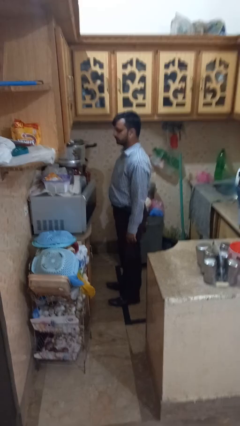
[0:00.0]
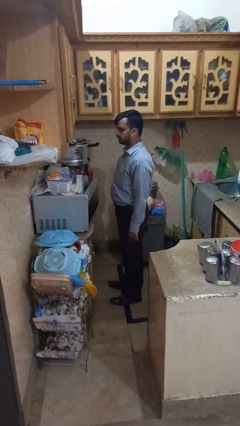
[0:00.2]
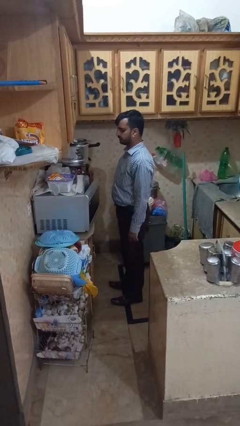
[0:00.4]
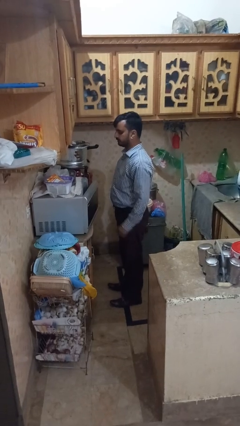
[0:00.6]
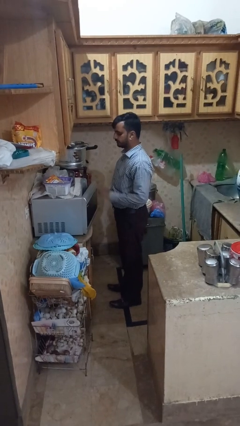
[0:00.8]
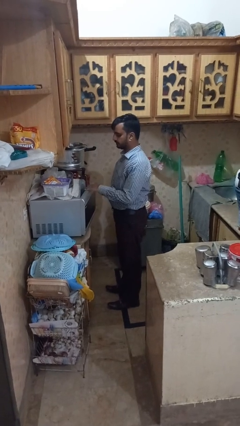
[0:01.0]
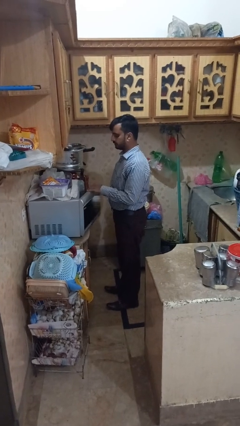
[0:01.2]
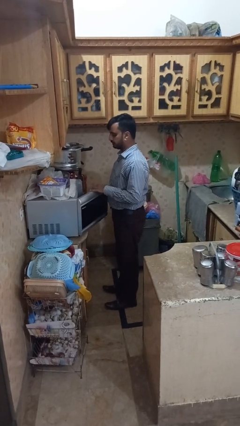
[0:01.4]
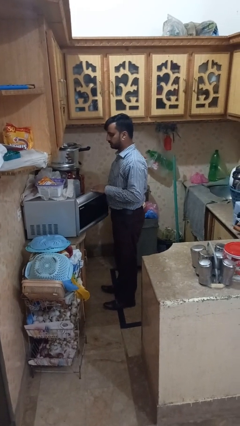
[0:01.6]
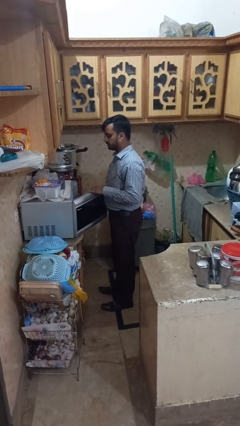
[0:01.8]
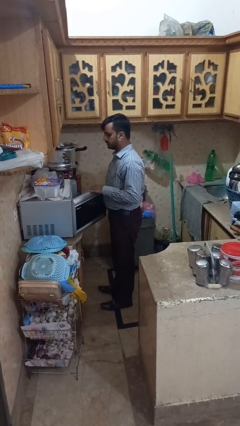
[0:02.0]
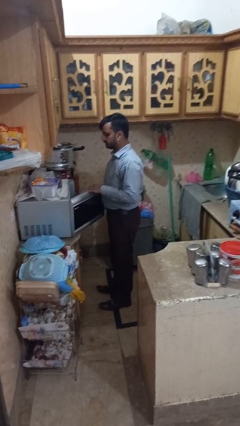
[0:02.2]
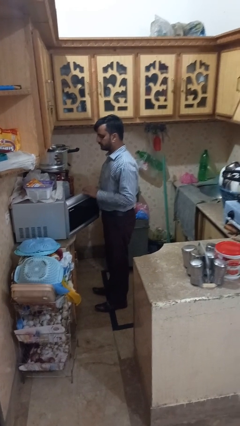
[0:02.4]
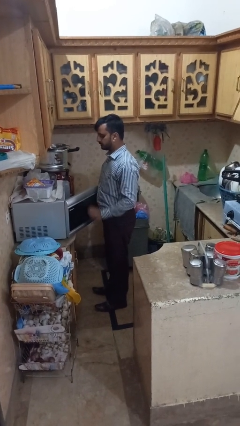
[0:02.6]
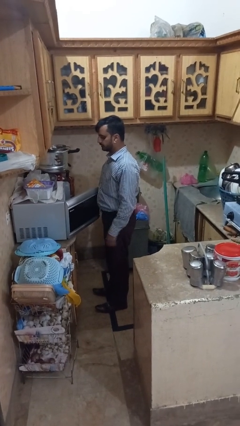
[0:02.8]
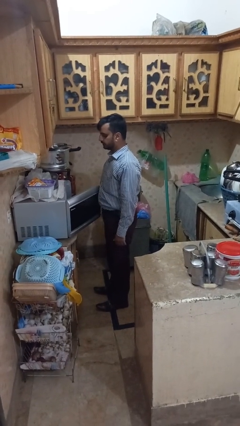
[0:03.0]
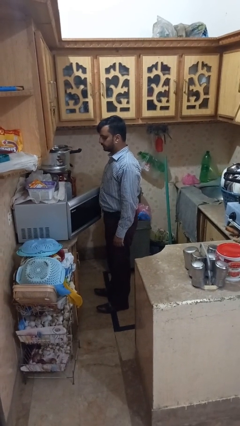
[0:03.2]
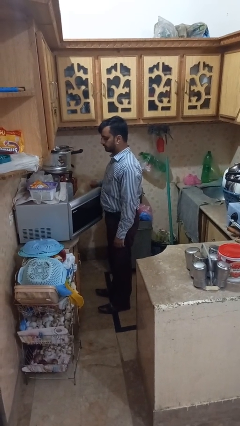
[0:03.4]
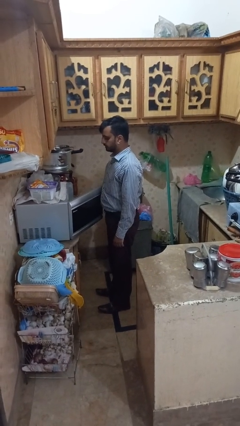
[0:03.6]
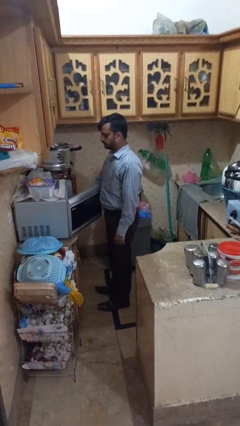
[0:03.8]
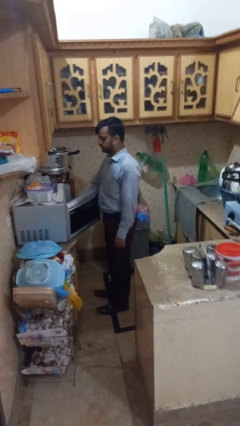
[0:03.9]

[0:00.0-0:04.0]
person opens microwave

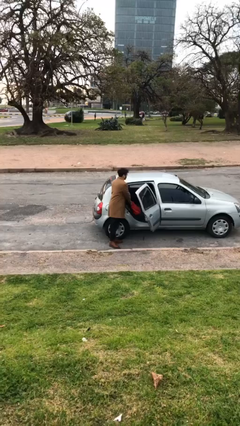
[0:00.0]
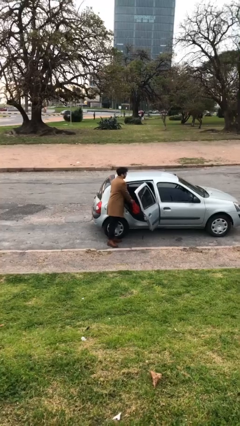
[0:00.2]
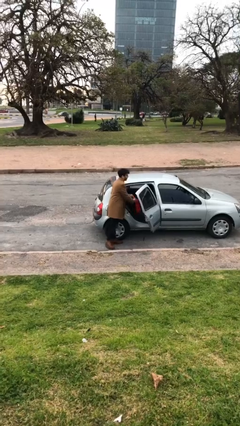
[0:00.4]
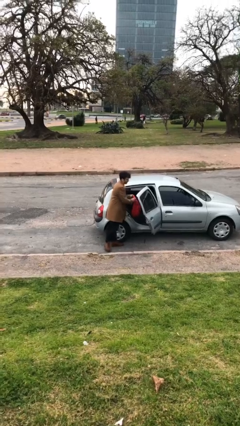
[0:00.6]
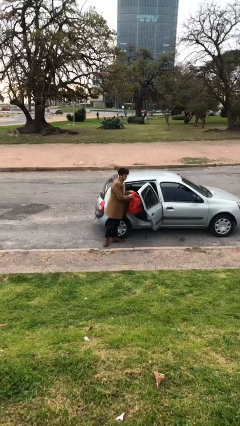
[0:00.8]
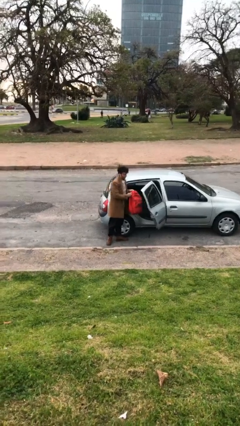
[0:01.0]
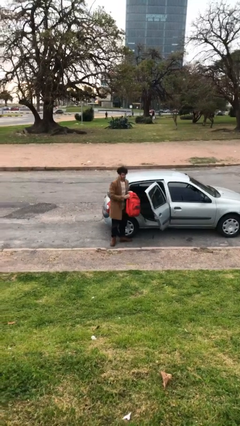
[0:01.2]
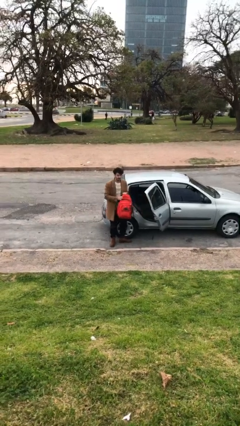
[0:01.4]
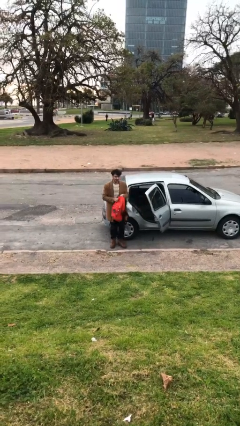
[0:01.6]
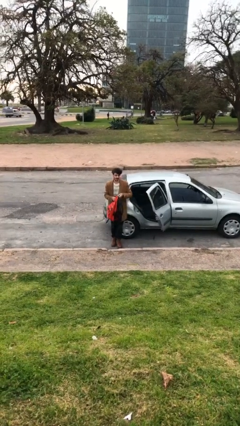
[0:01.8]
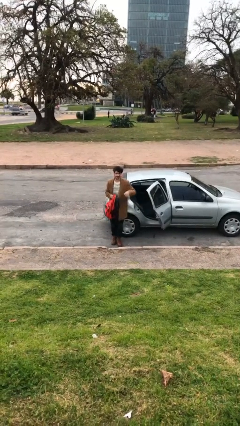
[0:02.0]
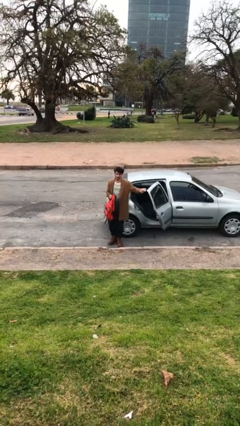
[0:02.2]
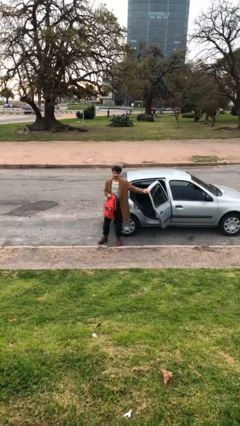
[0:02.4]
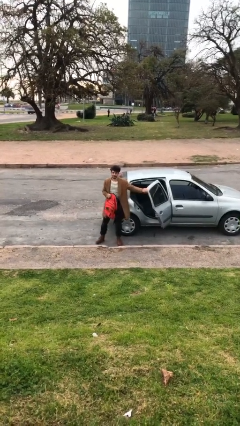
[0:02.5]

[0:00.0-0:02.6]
person unloads car

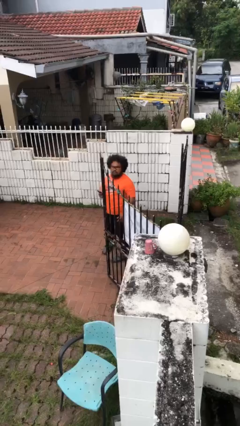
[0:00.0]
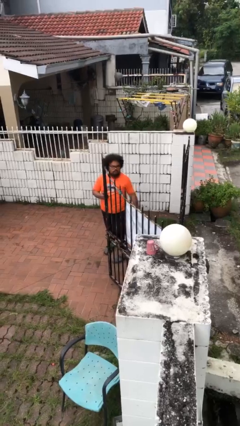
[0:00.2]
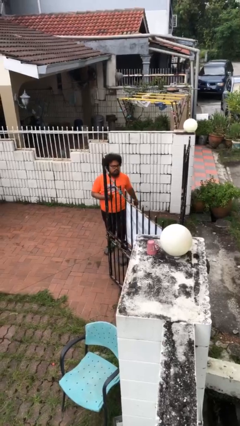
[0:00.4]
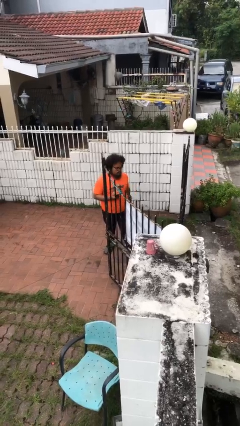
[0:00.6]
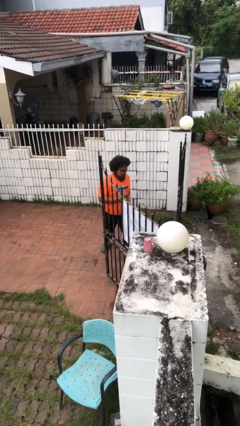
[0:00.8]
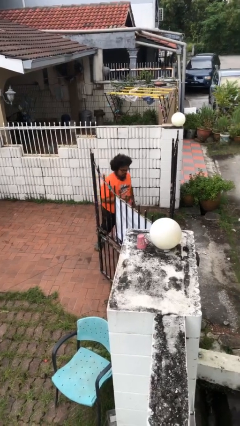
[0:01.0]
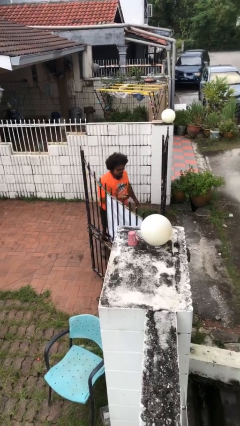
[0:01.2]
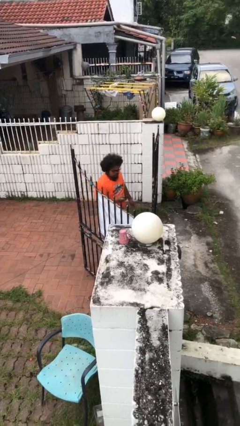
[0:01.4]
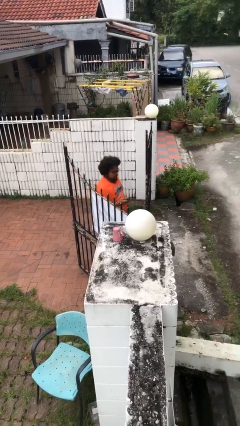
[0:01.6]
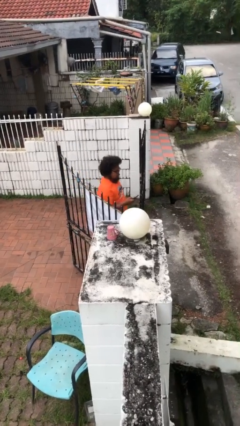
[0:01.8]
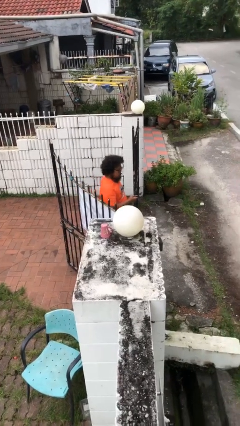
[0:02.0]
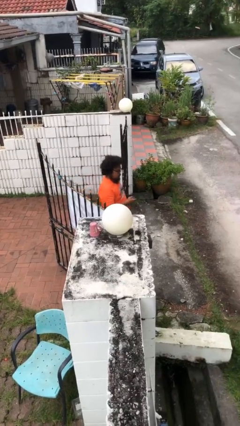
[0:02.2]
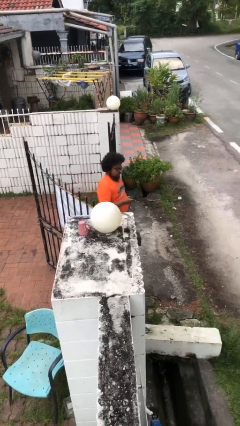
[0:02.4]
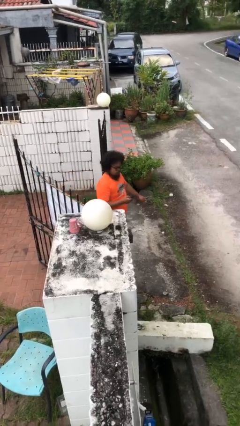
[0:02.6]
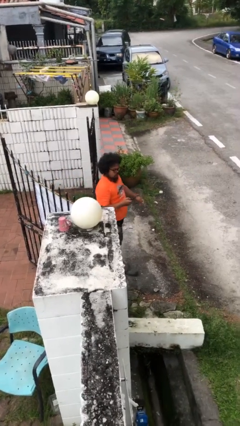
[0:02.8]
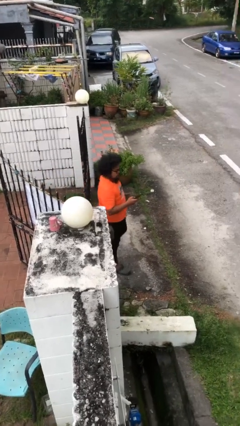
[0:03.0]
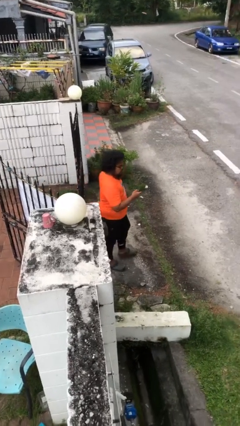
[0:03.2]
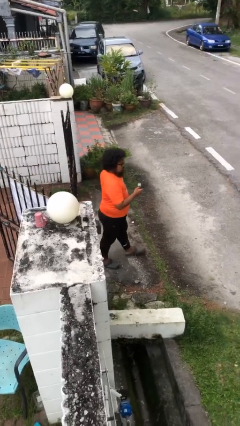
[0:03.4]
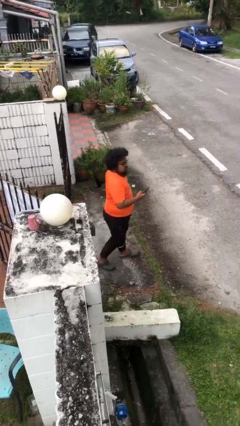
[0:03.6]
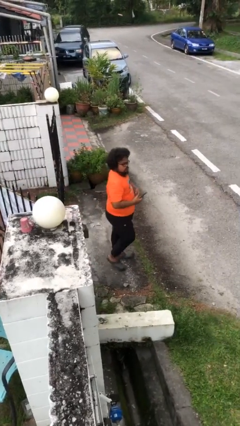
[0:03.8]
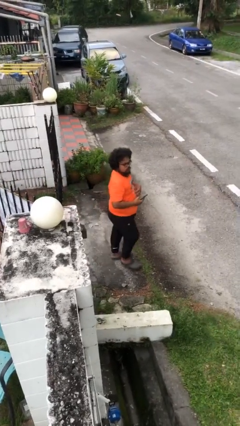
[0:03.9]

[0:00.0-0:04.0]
person exits scene through structure

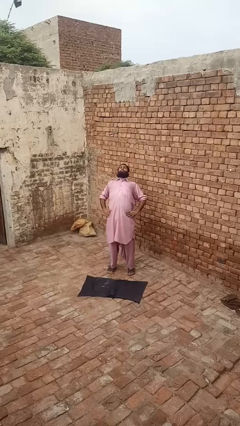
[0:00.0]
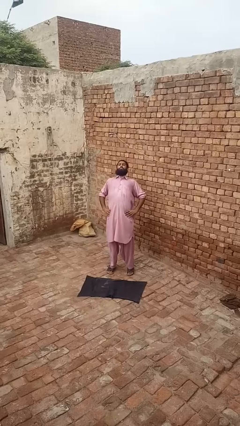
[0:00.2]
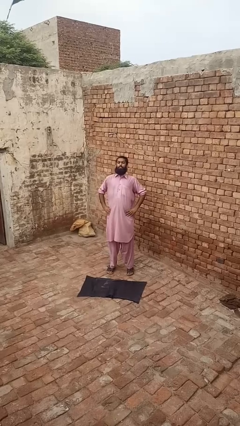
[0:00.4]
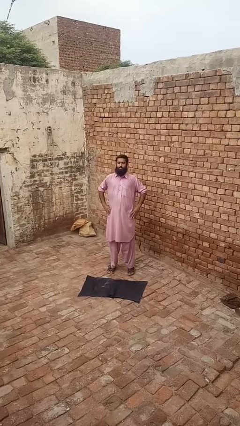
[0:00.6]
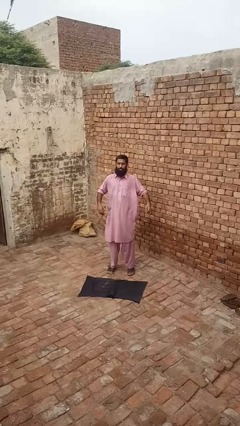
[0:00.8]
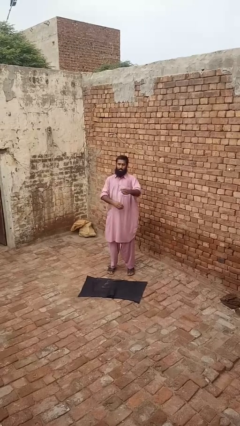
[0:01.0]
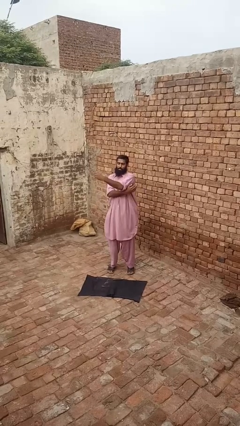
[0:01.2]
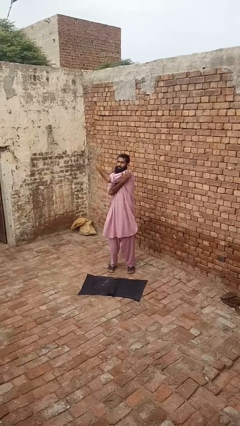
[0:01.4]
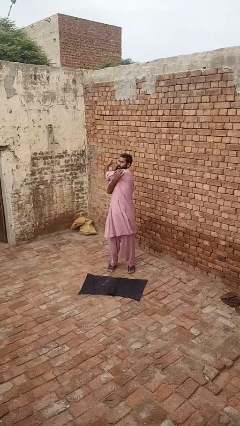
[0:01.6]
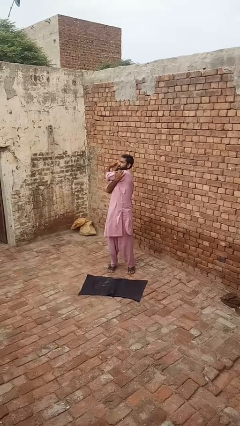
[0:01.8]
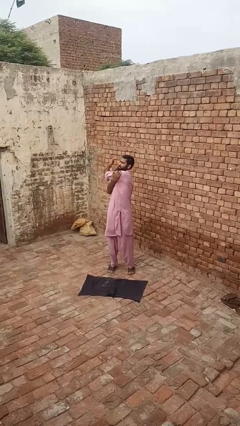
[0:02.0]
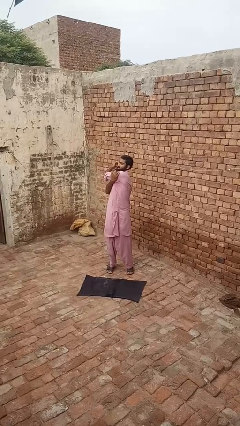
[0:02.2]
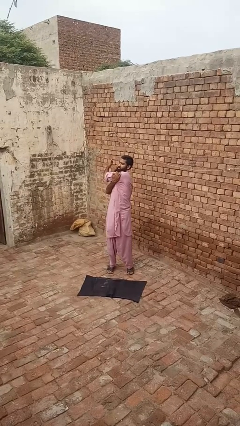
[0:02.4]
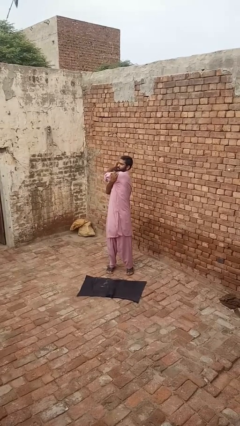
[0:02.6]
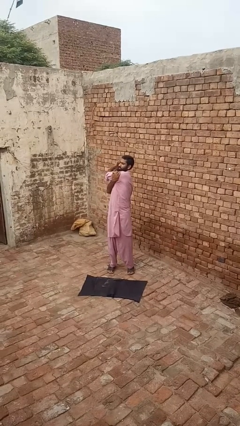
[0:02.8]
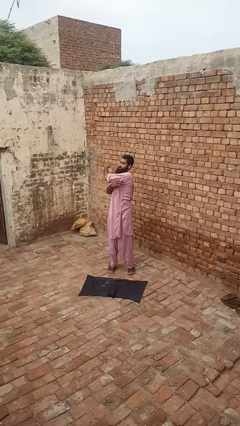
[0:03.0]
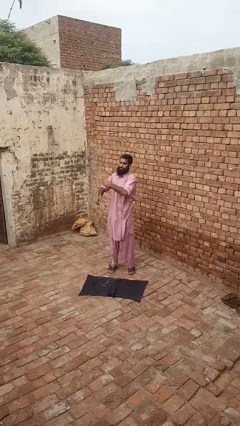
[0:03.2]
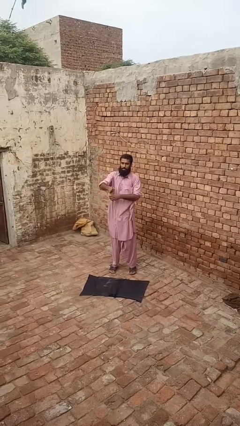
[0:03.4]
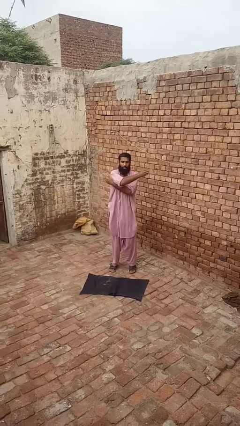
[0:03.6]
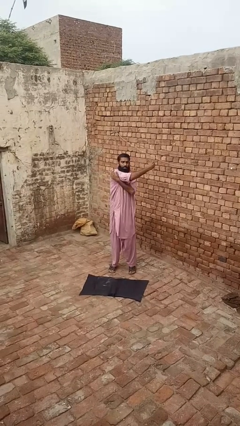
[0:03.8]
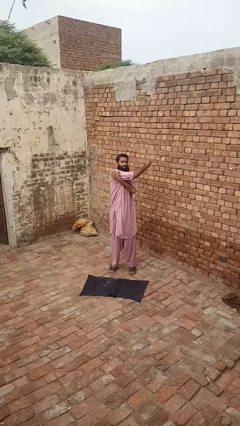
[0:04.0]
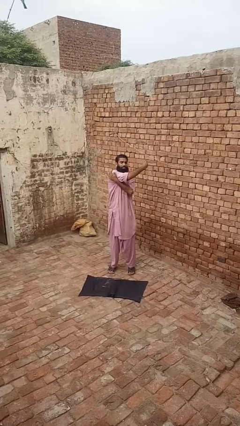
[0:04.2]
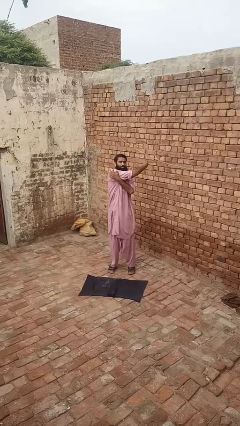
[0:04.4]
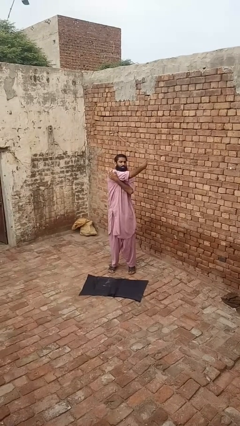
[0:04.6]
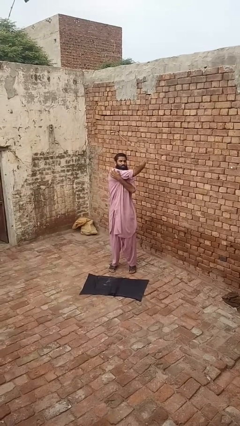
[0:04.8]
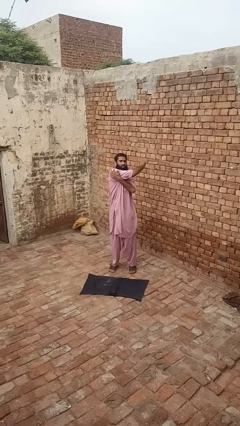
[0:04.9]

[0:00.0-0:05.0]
person stretches arms to side

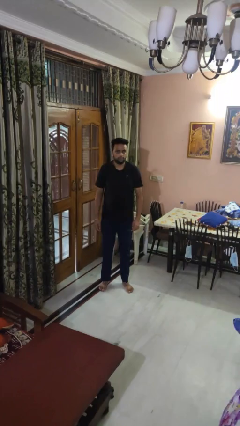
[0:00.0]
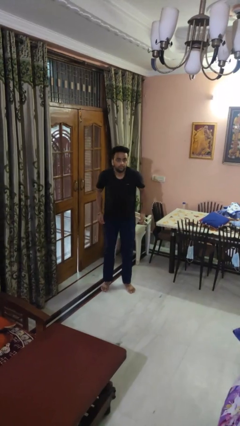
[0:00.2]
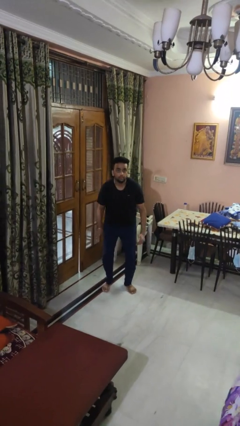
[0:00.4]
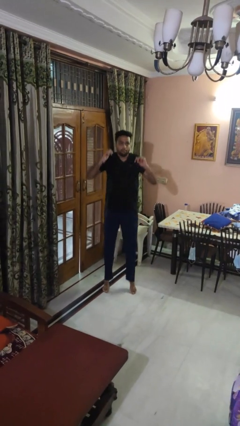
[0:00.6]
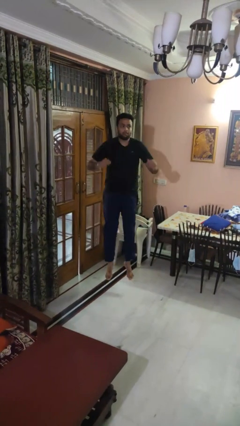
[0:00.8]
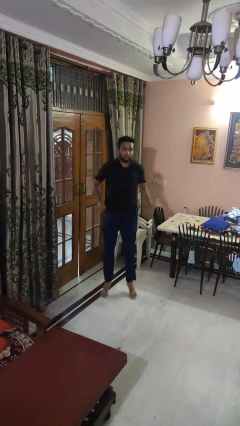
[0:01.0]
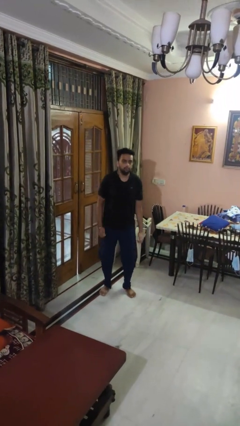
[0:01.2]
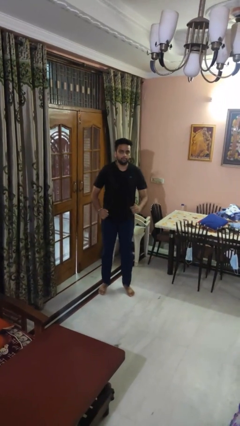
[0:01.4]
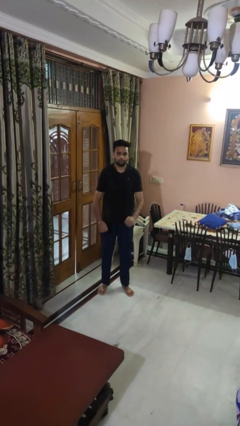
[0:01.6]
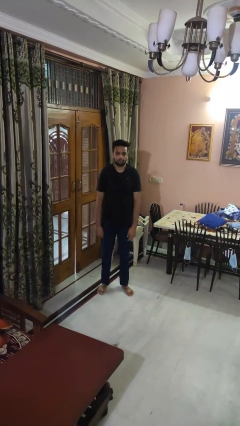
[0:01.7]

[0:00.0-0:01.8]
person jumps

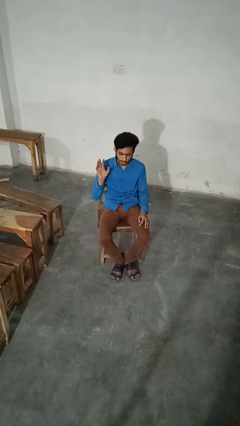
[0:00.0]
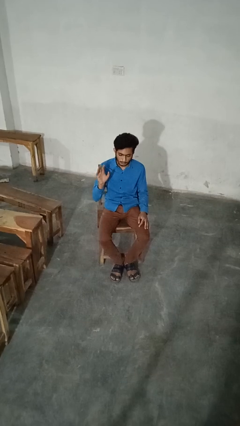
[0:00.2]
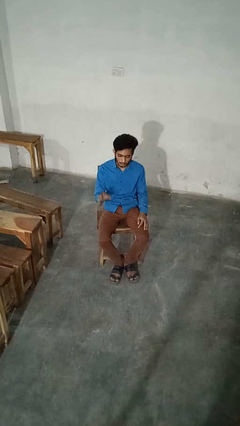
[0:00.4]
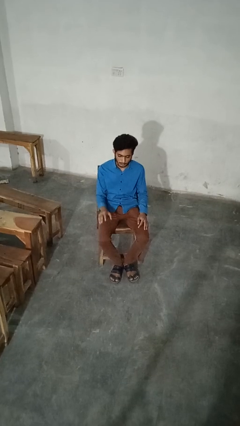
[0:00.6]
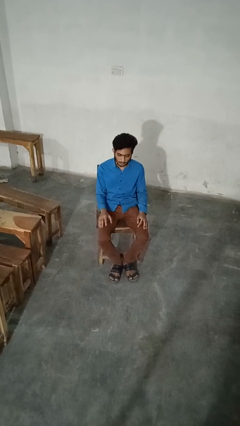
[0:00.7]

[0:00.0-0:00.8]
person gestures lower hand
